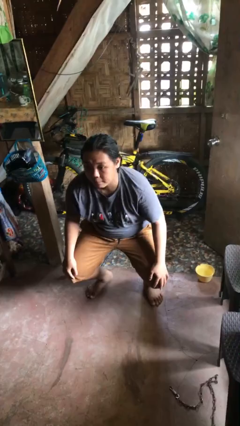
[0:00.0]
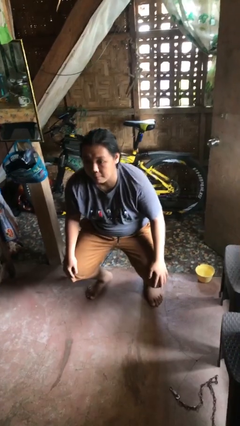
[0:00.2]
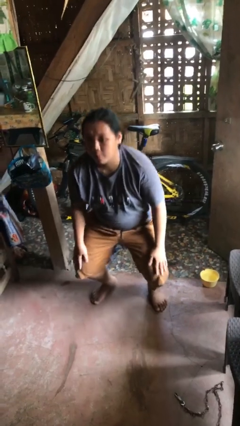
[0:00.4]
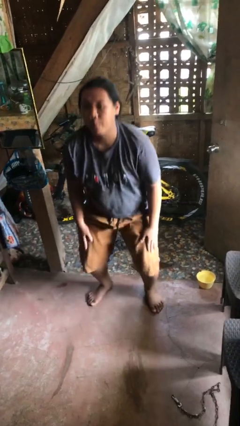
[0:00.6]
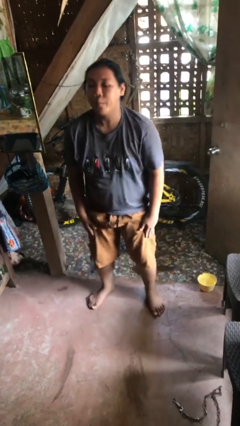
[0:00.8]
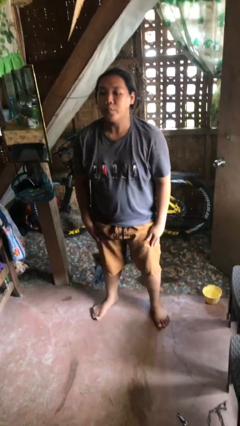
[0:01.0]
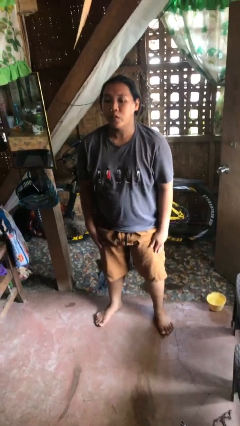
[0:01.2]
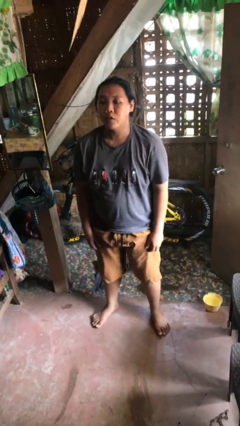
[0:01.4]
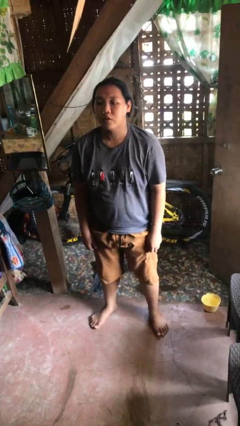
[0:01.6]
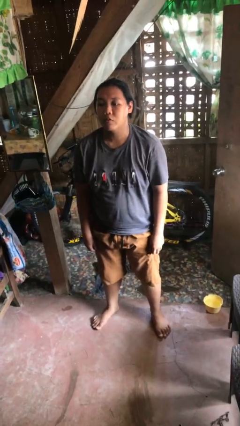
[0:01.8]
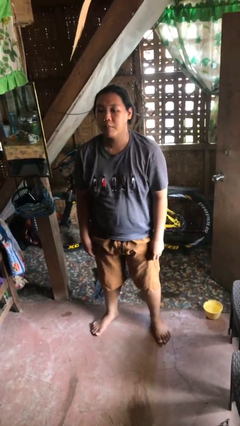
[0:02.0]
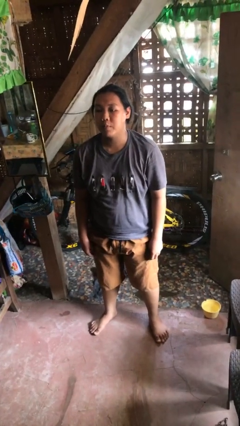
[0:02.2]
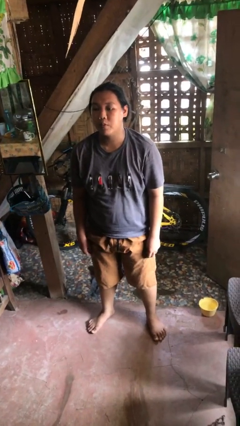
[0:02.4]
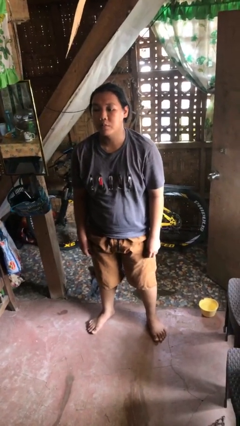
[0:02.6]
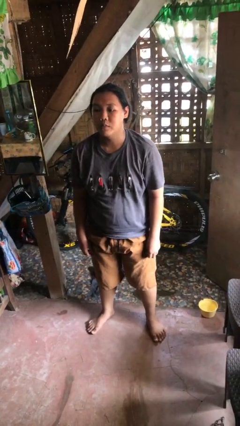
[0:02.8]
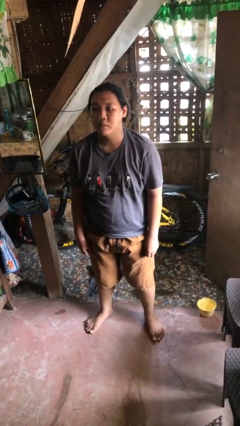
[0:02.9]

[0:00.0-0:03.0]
person stands up

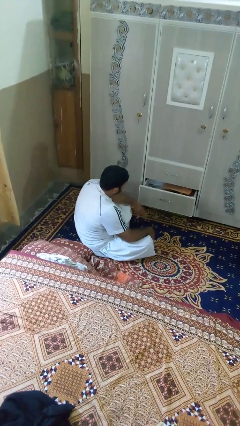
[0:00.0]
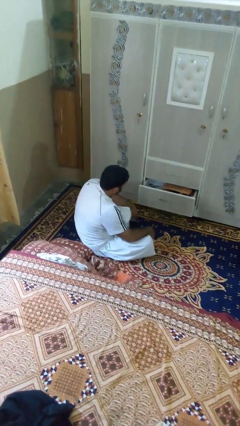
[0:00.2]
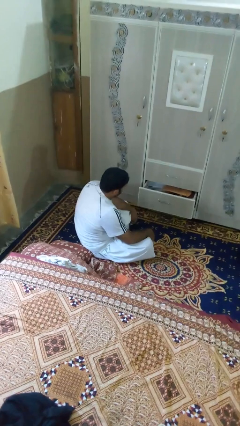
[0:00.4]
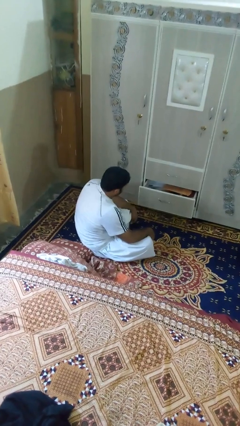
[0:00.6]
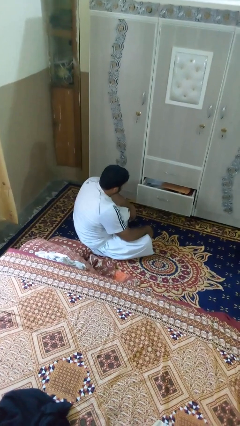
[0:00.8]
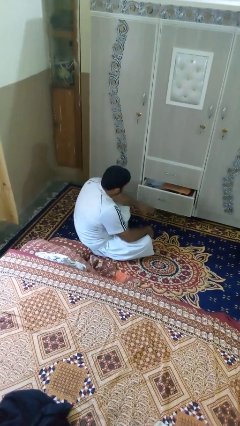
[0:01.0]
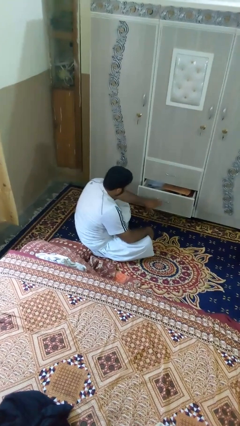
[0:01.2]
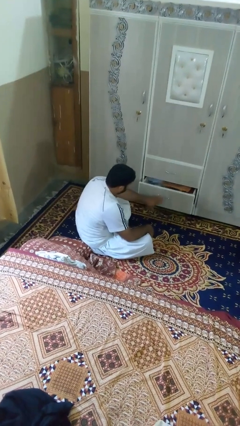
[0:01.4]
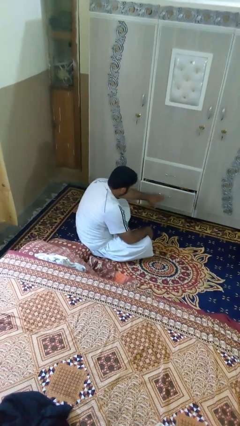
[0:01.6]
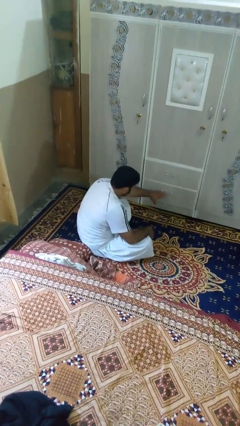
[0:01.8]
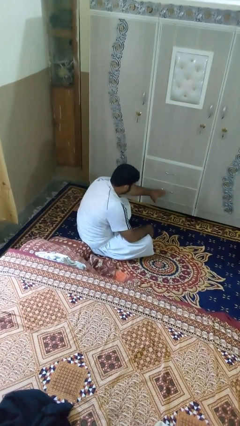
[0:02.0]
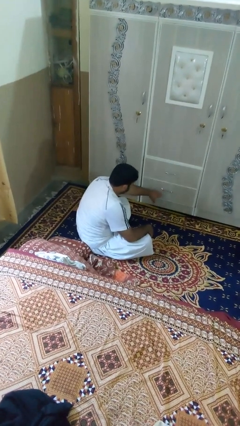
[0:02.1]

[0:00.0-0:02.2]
person closes dresser drawer

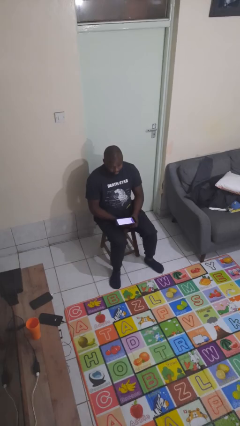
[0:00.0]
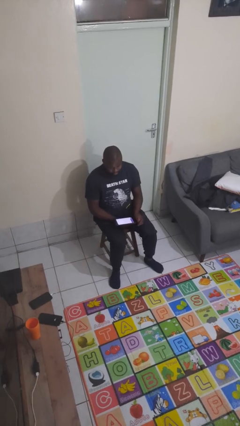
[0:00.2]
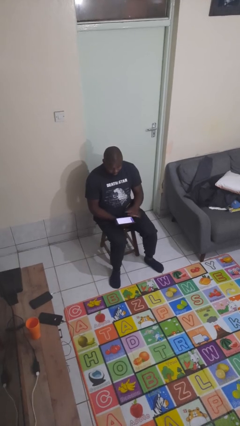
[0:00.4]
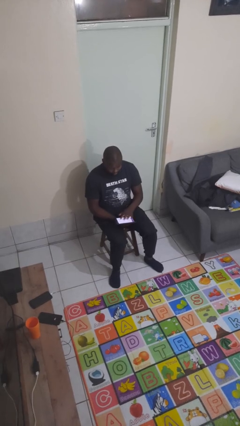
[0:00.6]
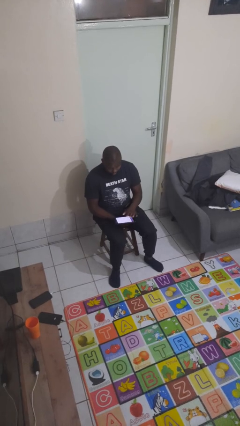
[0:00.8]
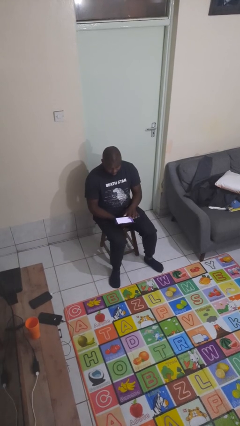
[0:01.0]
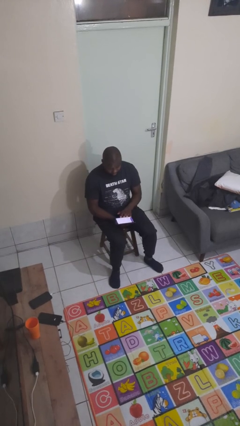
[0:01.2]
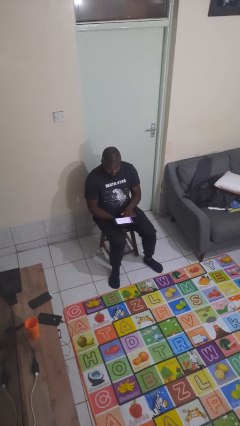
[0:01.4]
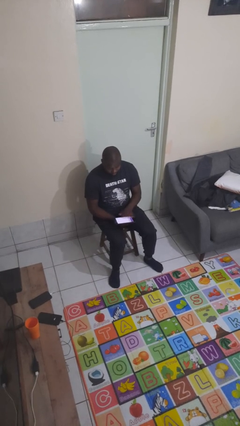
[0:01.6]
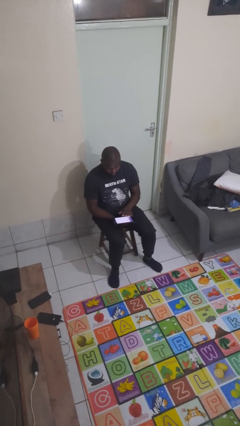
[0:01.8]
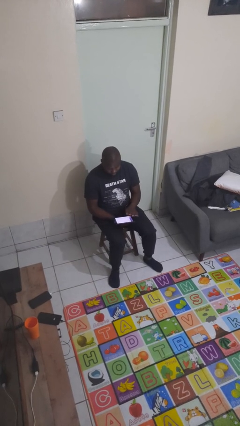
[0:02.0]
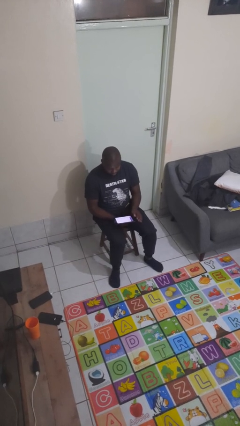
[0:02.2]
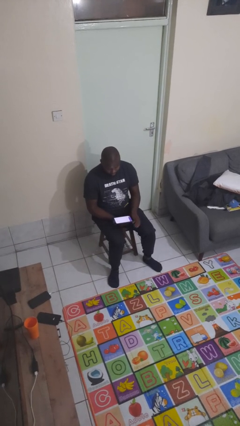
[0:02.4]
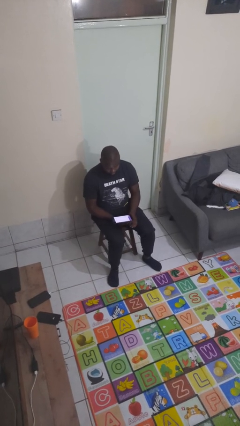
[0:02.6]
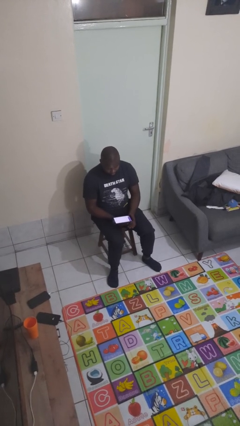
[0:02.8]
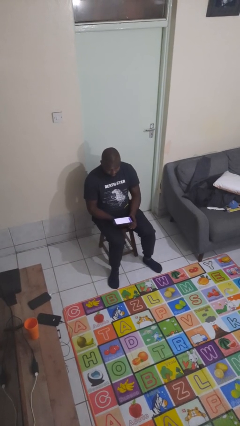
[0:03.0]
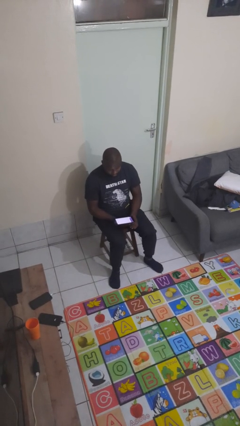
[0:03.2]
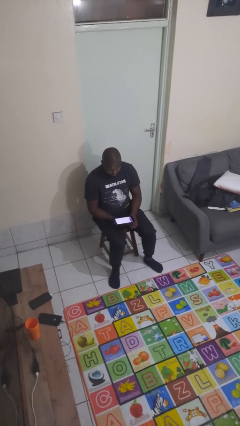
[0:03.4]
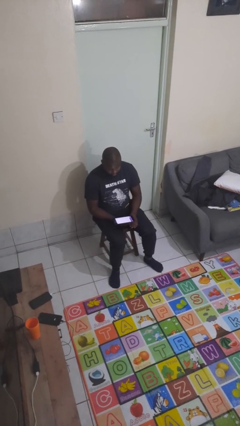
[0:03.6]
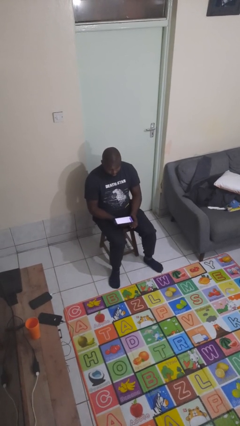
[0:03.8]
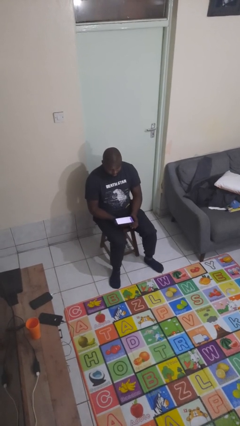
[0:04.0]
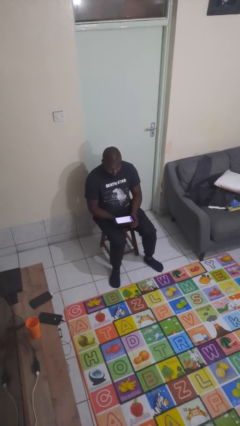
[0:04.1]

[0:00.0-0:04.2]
person interacts with tablet

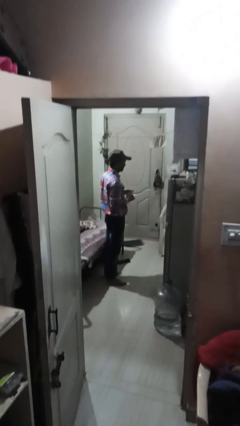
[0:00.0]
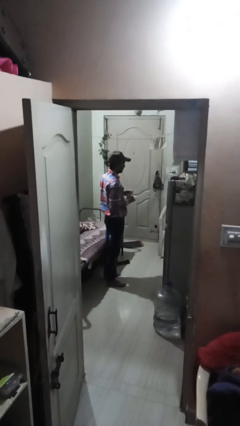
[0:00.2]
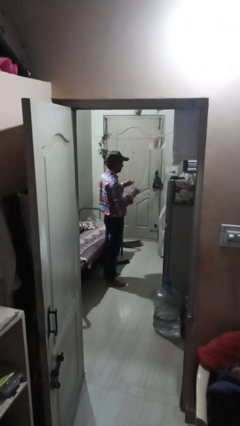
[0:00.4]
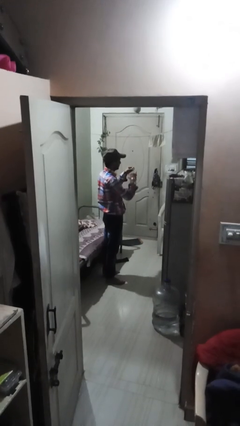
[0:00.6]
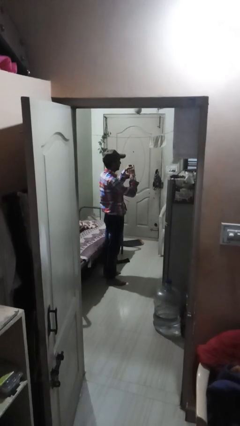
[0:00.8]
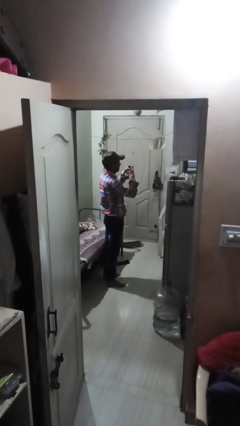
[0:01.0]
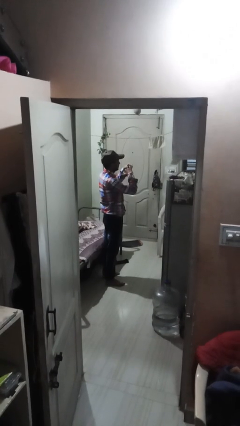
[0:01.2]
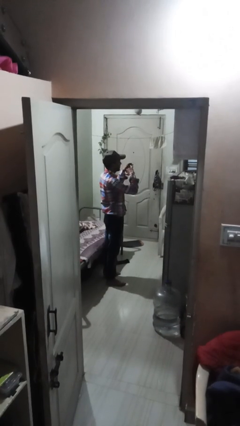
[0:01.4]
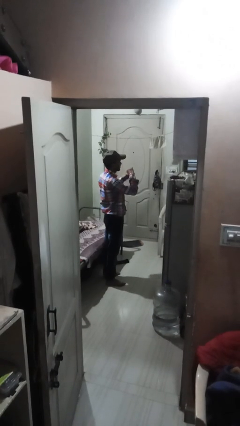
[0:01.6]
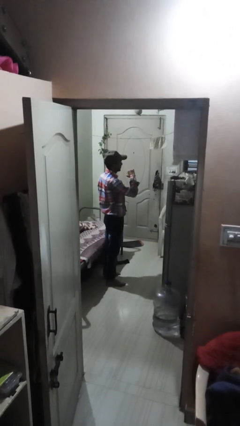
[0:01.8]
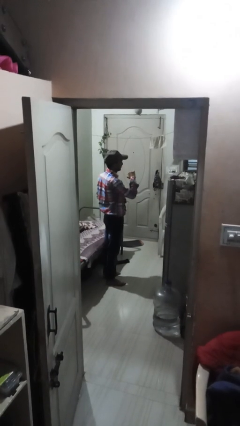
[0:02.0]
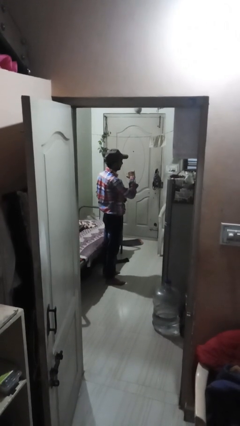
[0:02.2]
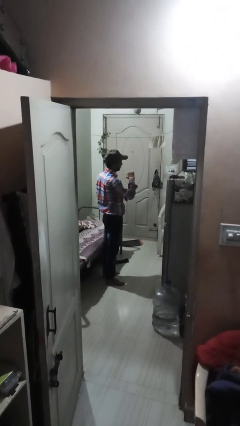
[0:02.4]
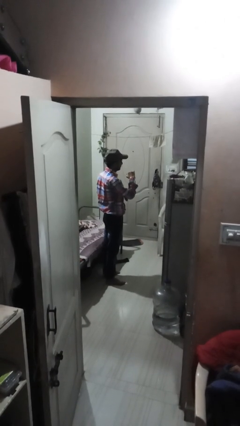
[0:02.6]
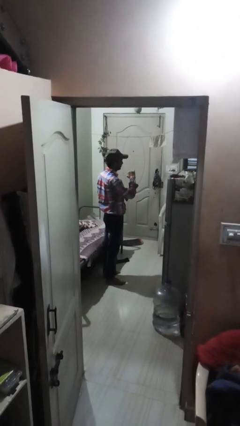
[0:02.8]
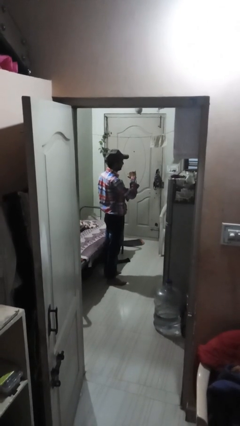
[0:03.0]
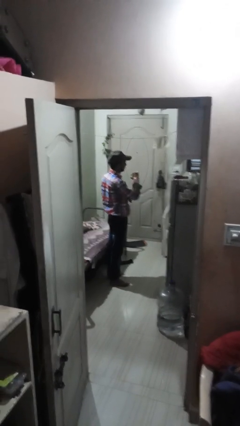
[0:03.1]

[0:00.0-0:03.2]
person puts on ring

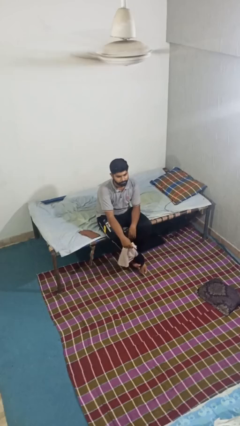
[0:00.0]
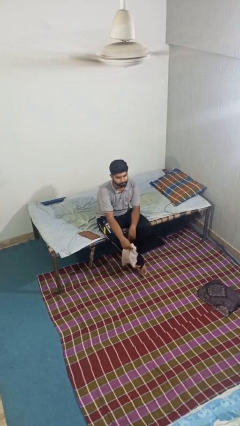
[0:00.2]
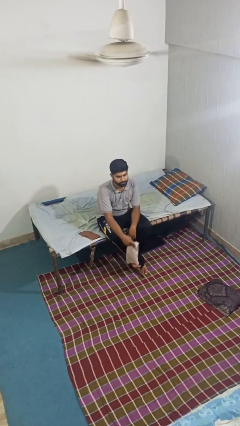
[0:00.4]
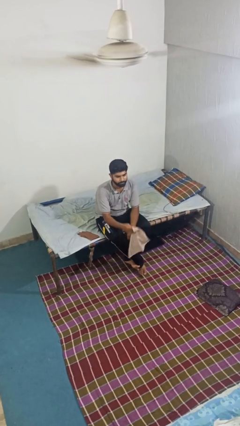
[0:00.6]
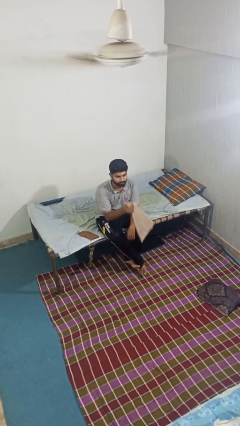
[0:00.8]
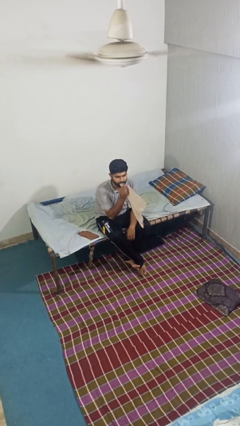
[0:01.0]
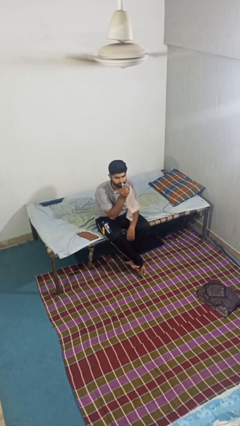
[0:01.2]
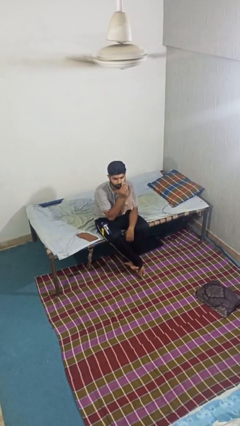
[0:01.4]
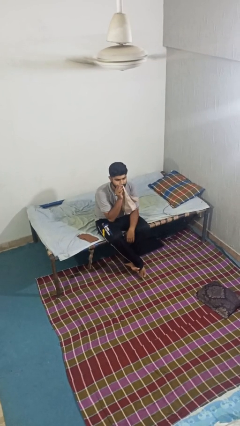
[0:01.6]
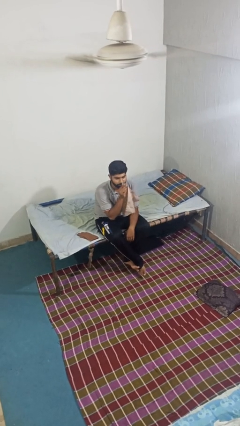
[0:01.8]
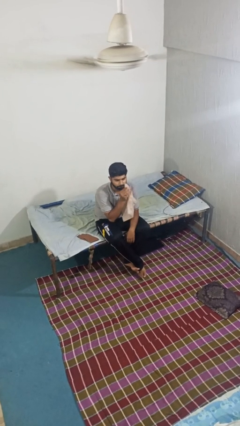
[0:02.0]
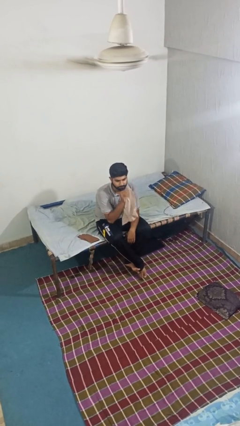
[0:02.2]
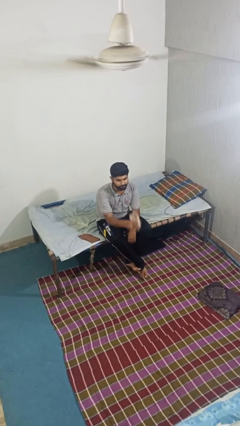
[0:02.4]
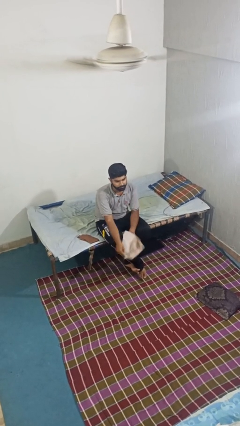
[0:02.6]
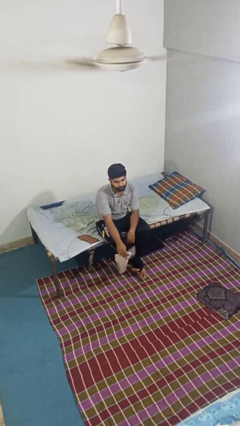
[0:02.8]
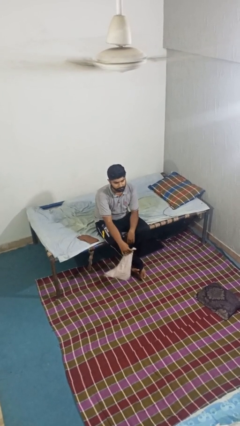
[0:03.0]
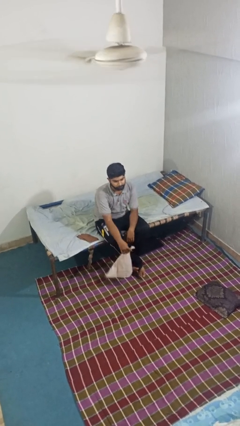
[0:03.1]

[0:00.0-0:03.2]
person wipes mouth with napkin

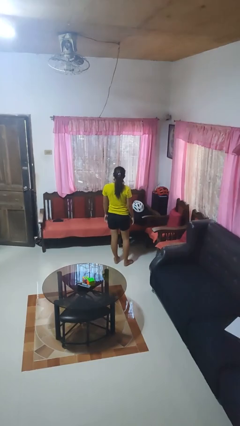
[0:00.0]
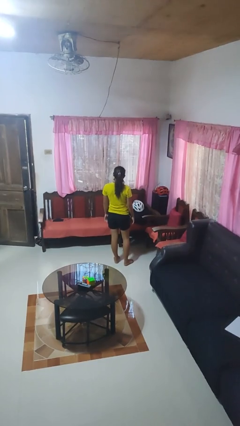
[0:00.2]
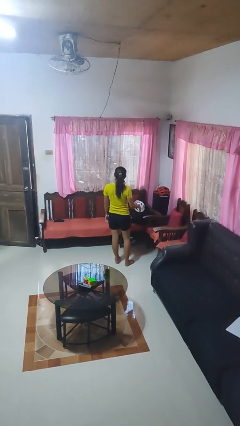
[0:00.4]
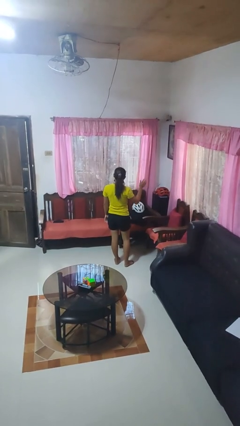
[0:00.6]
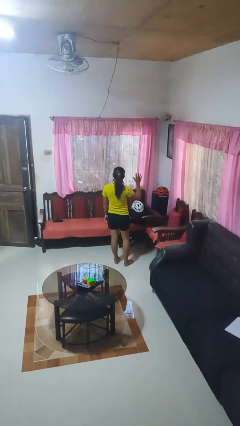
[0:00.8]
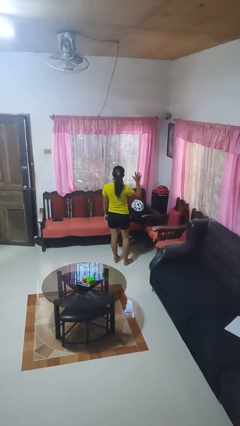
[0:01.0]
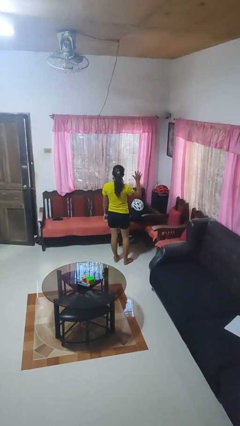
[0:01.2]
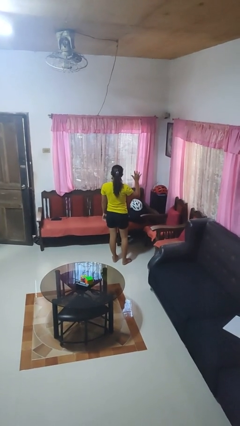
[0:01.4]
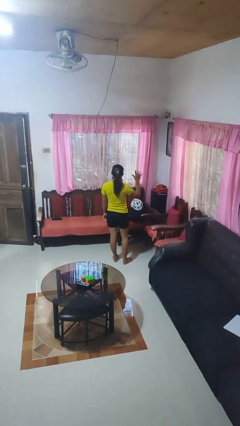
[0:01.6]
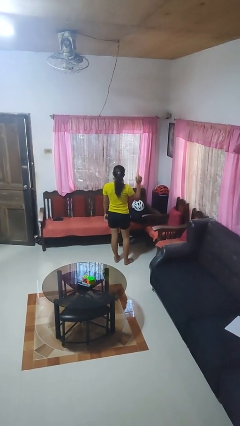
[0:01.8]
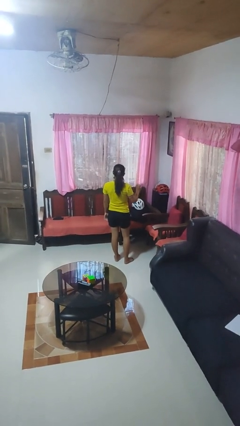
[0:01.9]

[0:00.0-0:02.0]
person gestures number five
